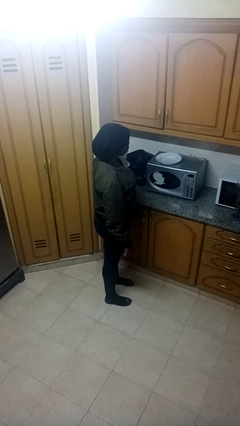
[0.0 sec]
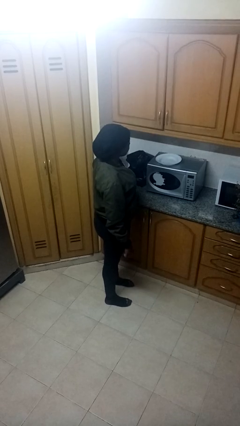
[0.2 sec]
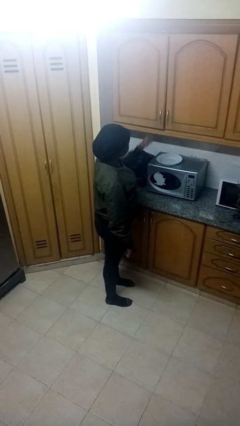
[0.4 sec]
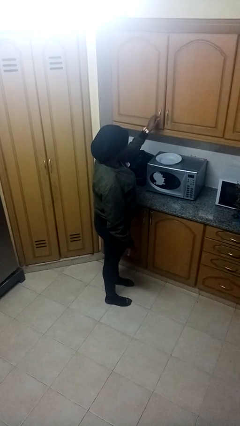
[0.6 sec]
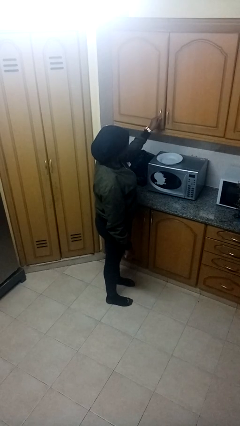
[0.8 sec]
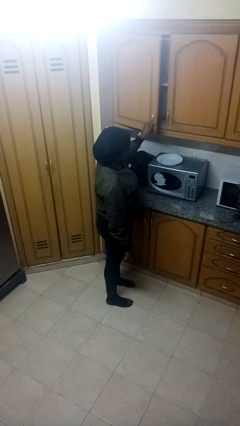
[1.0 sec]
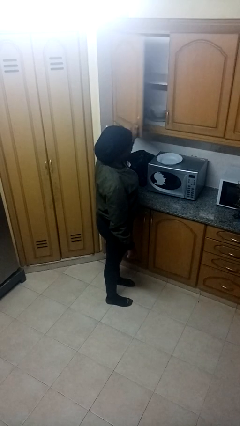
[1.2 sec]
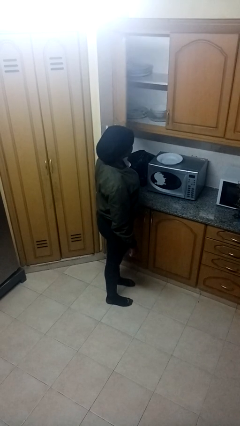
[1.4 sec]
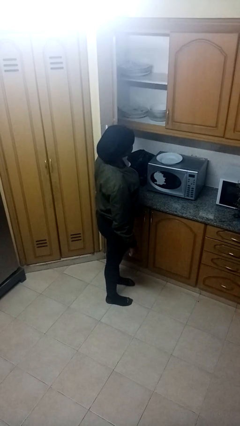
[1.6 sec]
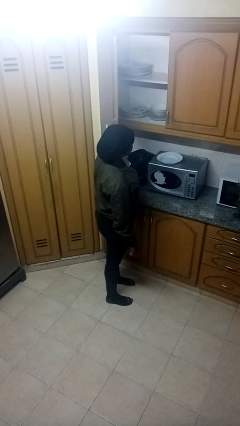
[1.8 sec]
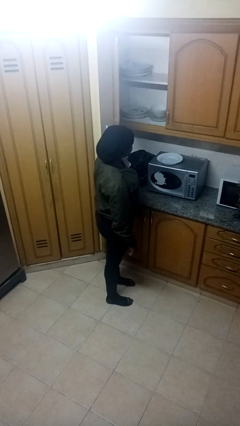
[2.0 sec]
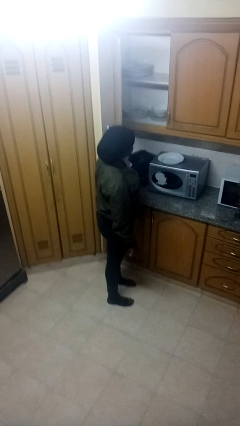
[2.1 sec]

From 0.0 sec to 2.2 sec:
person opens cabinet

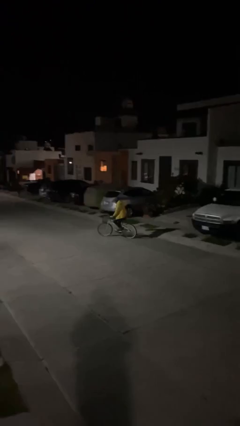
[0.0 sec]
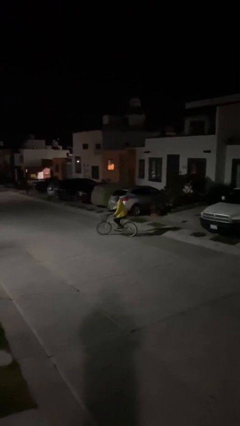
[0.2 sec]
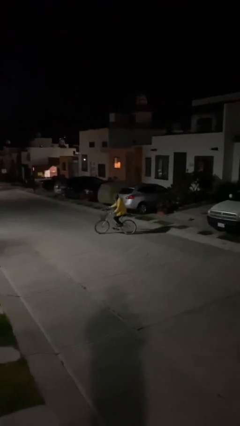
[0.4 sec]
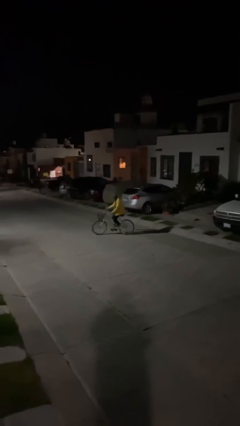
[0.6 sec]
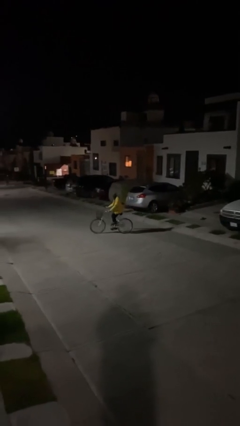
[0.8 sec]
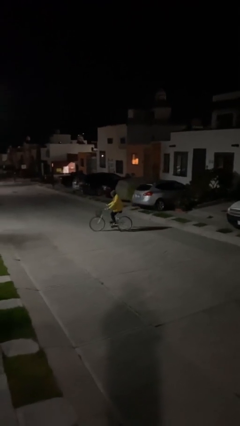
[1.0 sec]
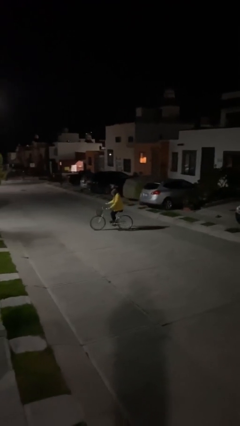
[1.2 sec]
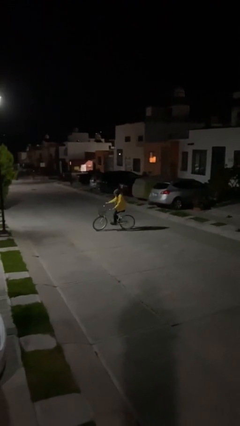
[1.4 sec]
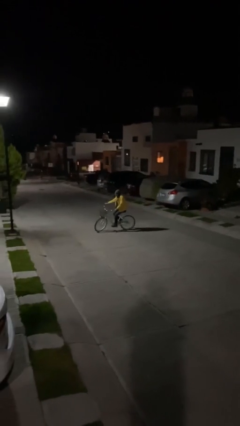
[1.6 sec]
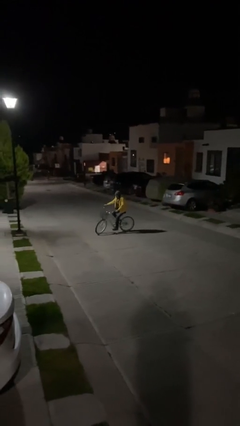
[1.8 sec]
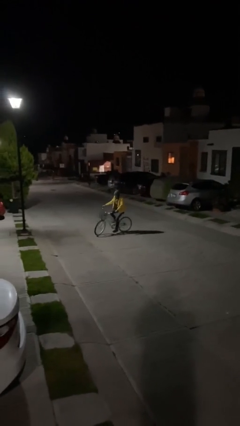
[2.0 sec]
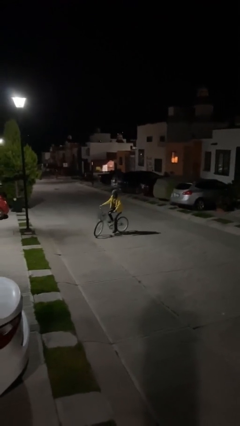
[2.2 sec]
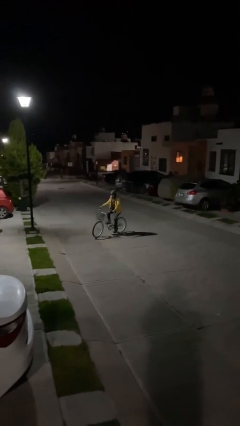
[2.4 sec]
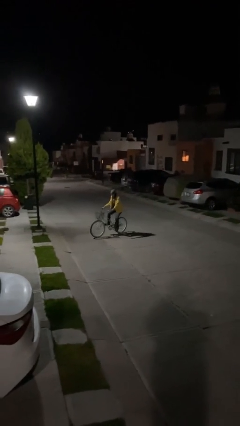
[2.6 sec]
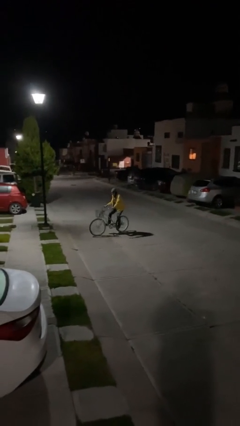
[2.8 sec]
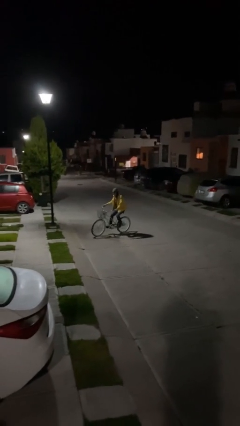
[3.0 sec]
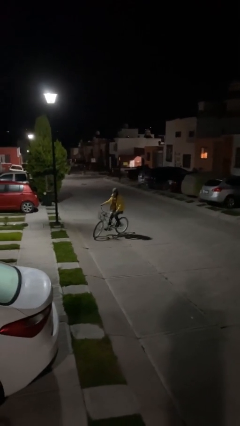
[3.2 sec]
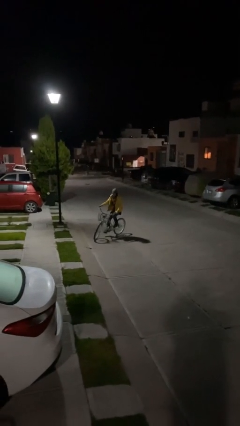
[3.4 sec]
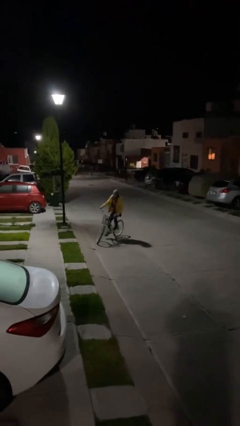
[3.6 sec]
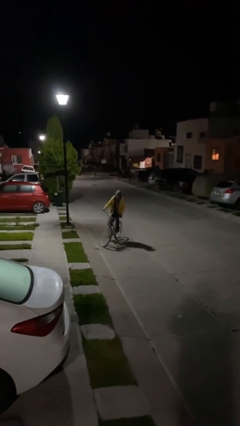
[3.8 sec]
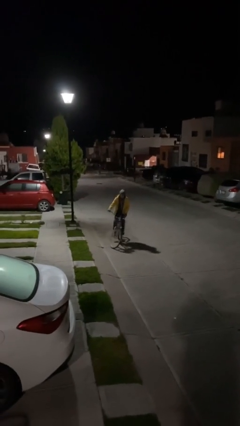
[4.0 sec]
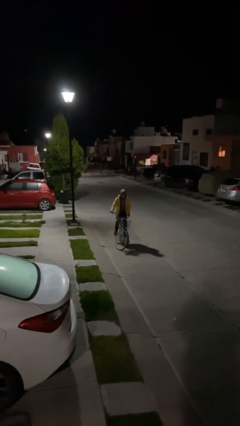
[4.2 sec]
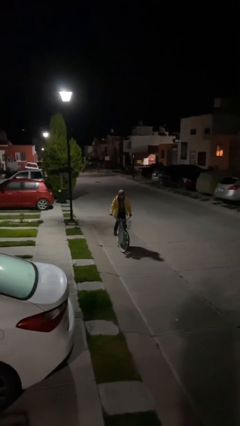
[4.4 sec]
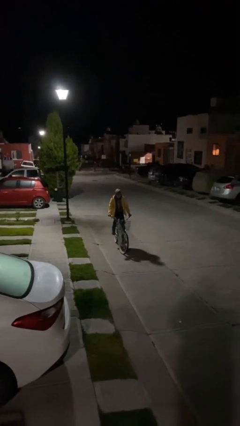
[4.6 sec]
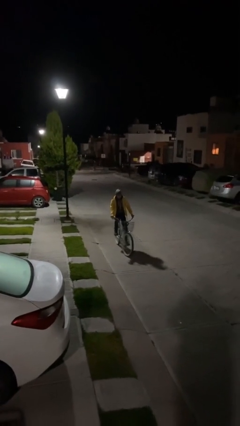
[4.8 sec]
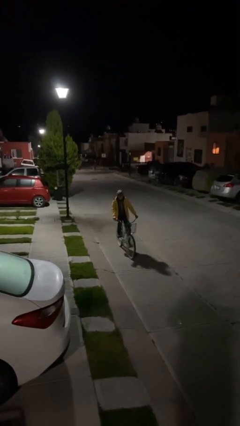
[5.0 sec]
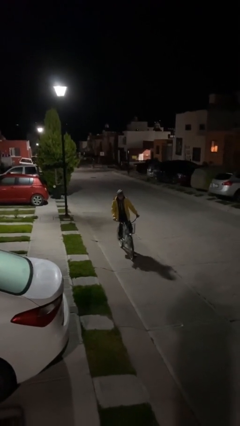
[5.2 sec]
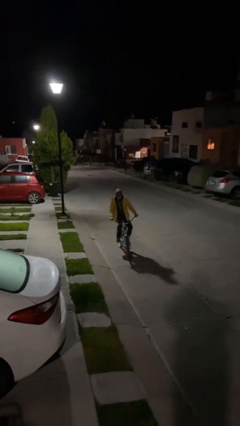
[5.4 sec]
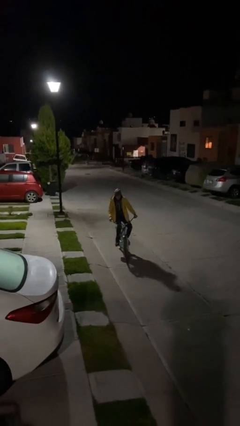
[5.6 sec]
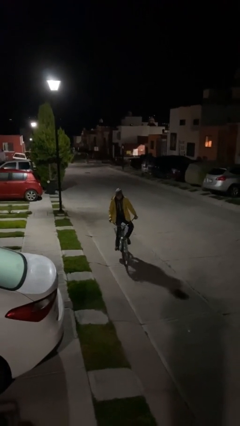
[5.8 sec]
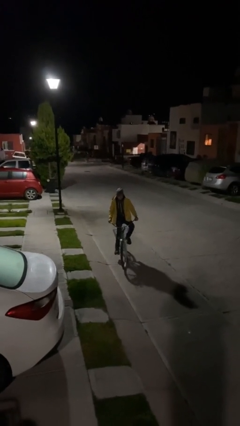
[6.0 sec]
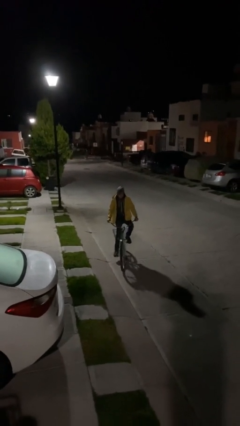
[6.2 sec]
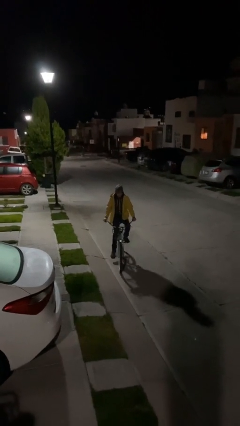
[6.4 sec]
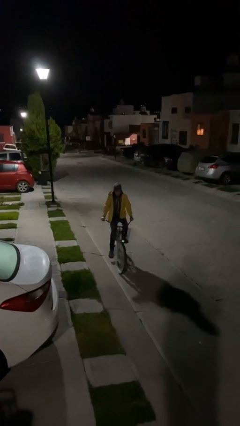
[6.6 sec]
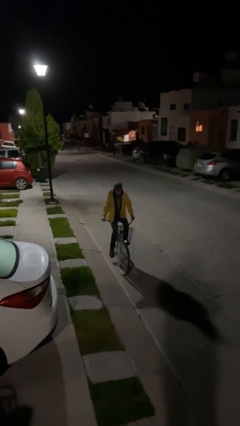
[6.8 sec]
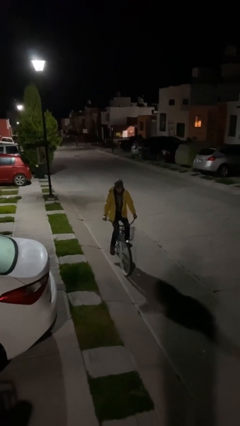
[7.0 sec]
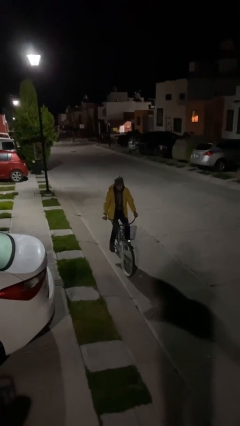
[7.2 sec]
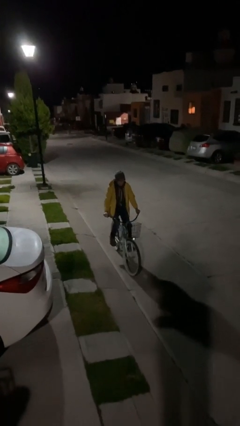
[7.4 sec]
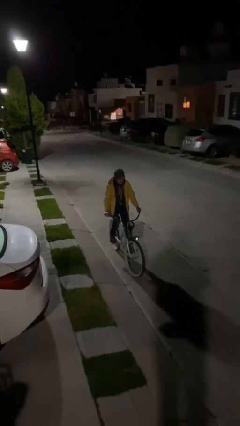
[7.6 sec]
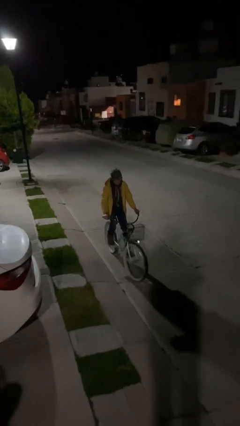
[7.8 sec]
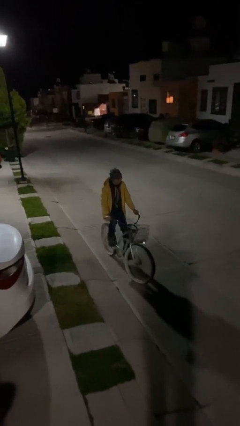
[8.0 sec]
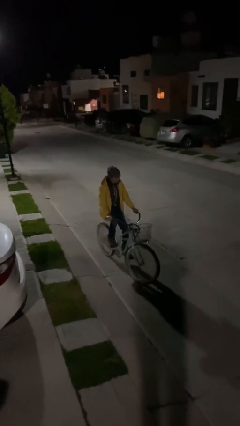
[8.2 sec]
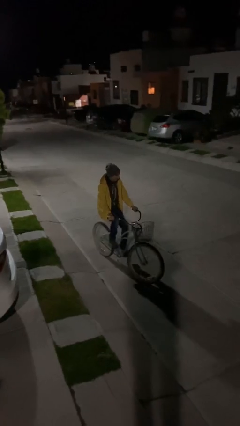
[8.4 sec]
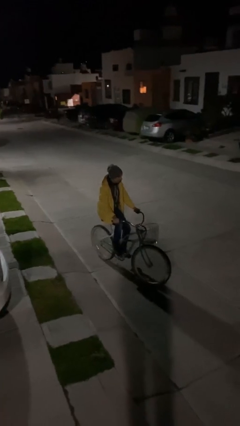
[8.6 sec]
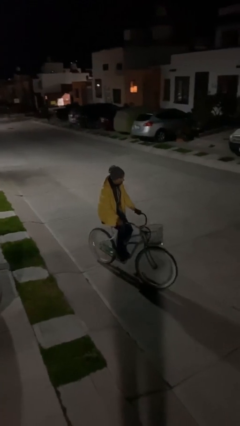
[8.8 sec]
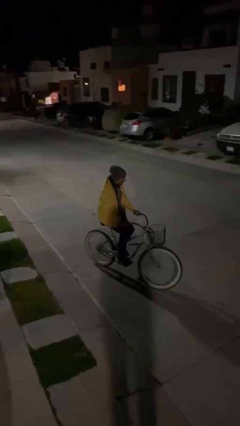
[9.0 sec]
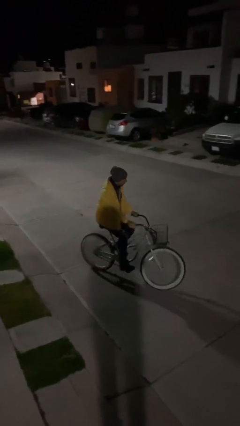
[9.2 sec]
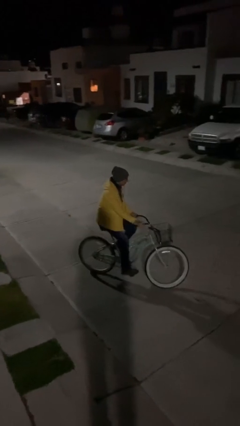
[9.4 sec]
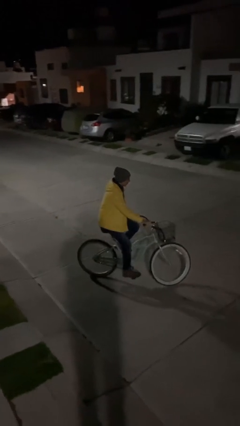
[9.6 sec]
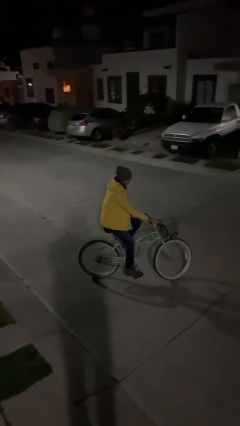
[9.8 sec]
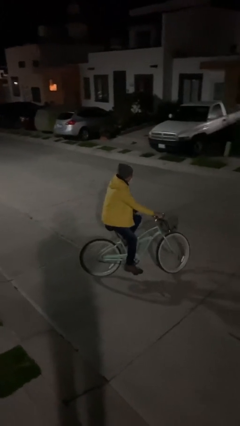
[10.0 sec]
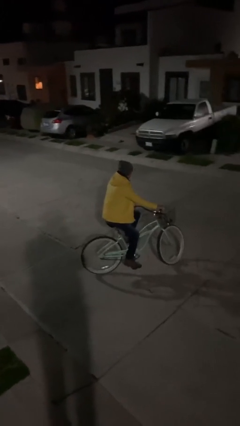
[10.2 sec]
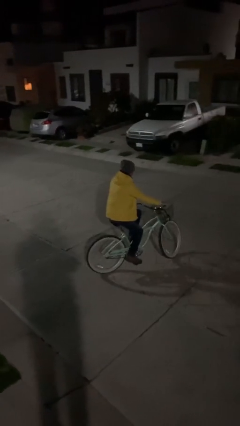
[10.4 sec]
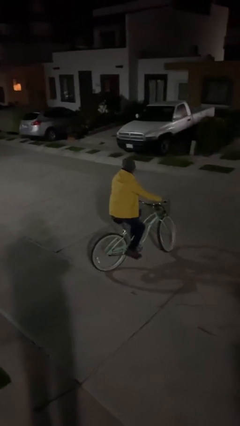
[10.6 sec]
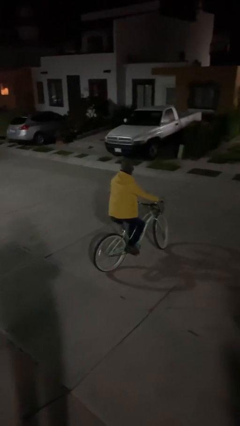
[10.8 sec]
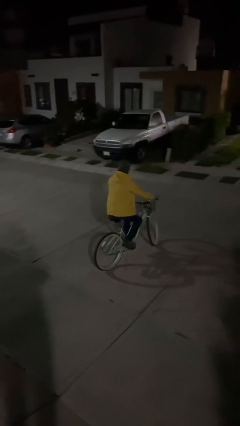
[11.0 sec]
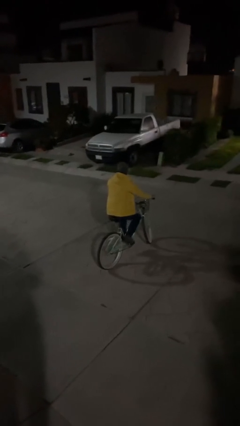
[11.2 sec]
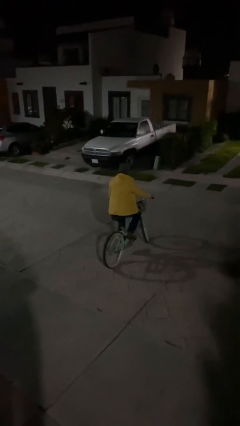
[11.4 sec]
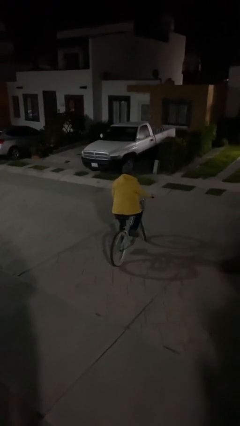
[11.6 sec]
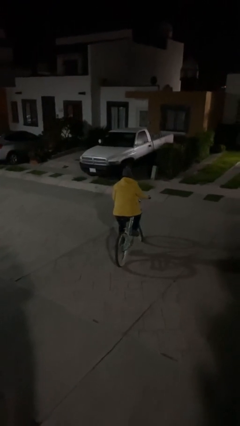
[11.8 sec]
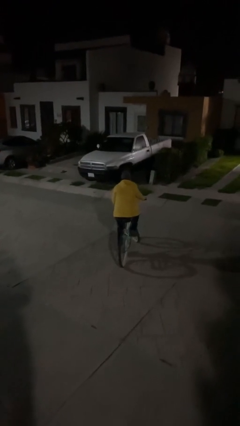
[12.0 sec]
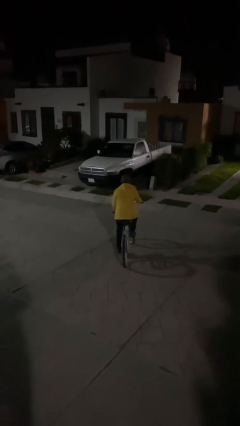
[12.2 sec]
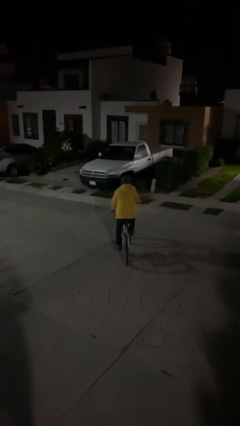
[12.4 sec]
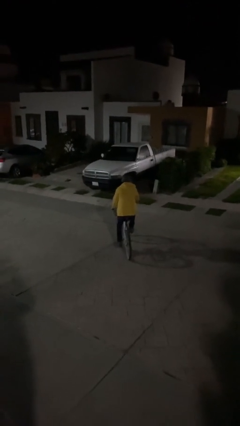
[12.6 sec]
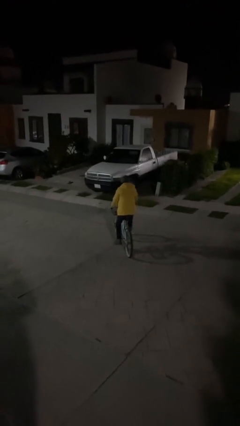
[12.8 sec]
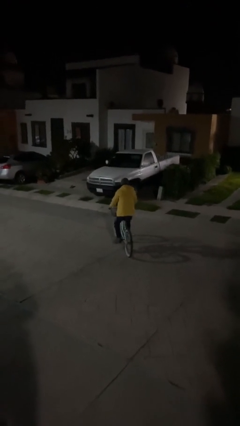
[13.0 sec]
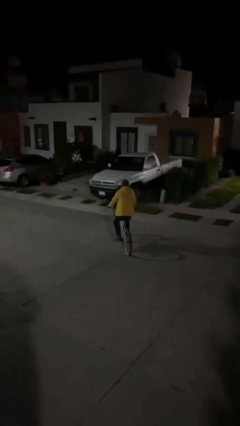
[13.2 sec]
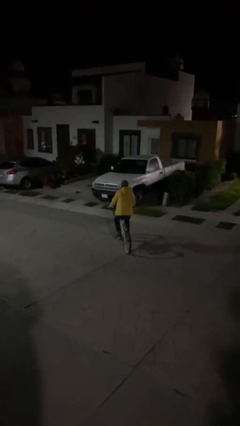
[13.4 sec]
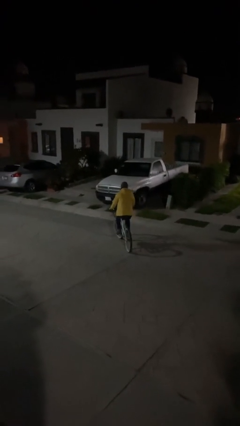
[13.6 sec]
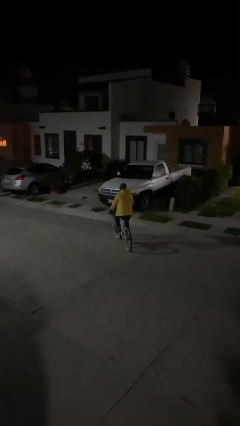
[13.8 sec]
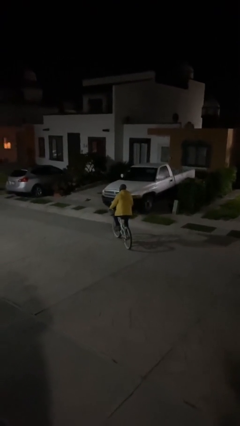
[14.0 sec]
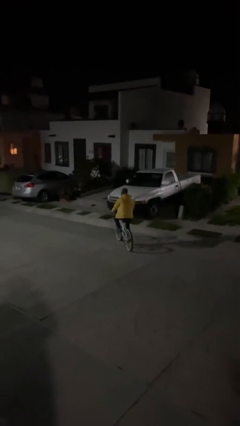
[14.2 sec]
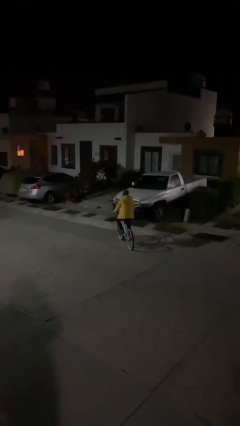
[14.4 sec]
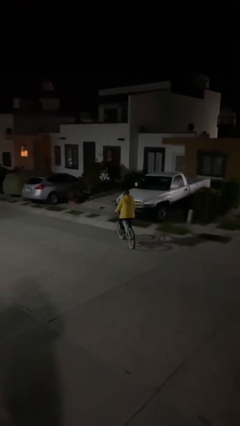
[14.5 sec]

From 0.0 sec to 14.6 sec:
person rides bicycle

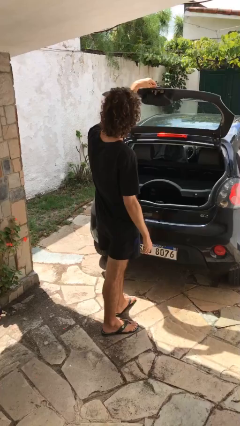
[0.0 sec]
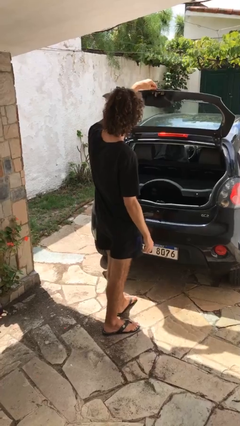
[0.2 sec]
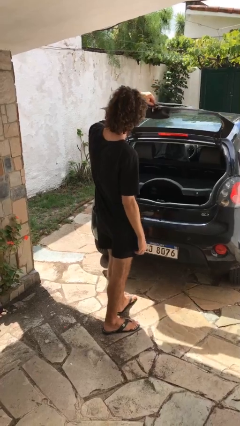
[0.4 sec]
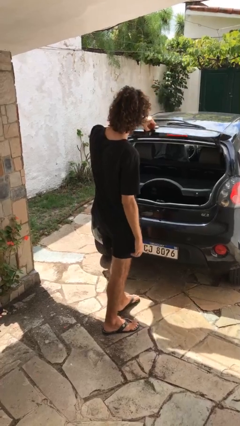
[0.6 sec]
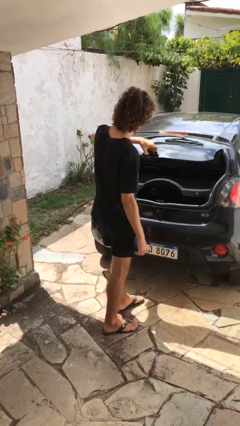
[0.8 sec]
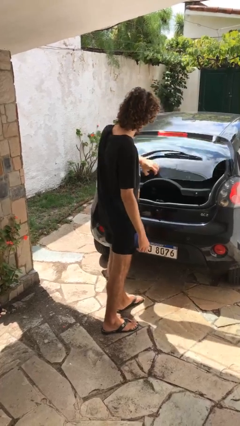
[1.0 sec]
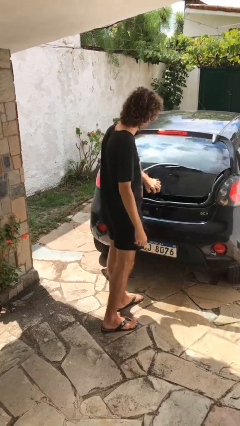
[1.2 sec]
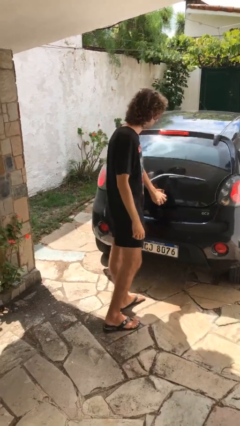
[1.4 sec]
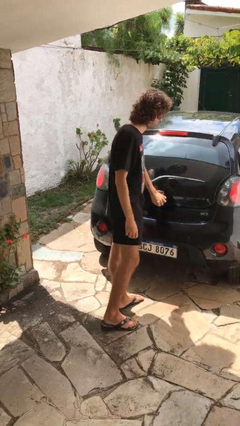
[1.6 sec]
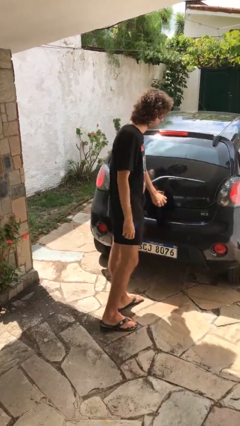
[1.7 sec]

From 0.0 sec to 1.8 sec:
person closes car trunk
